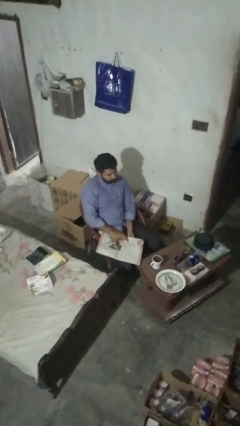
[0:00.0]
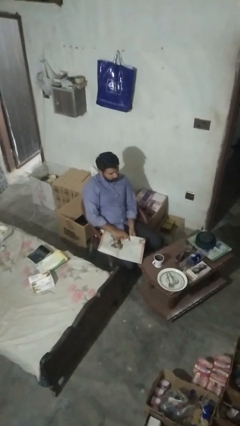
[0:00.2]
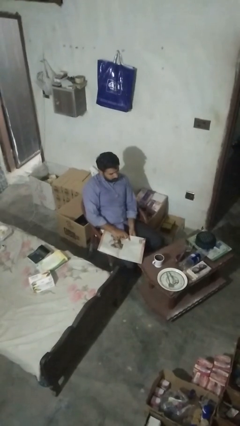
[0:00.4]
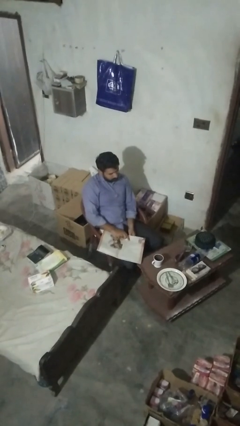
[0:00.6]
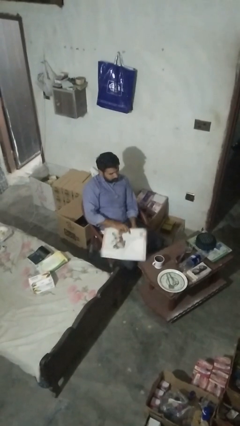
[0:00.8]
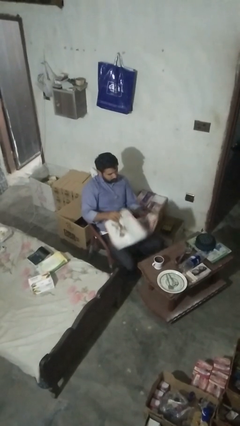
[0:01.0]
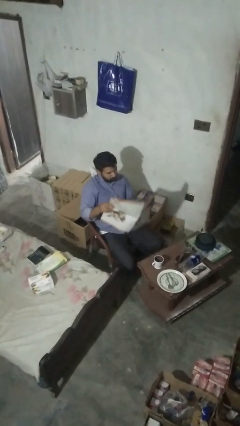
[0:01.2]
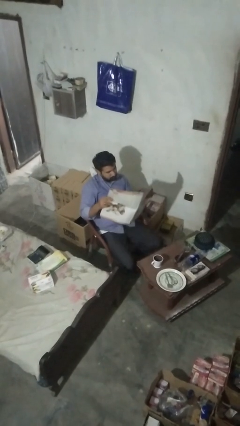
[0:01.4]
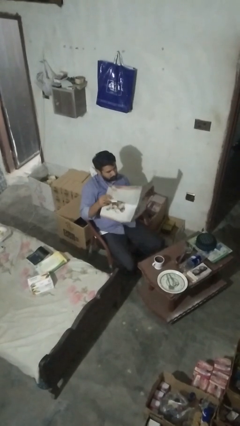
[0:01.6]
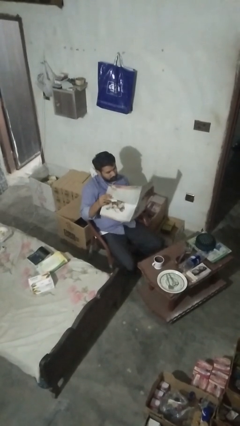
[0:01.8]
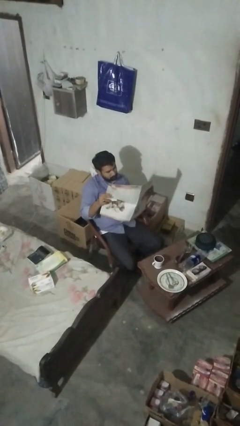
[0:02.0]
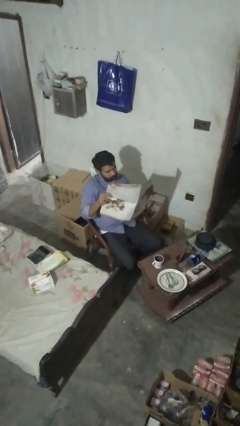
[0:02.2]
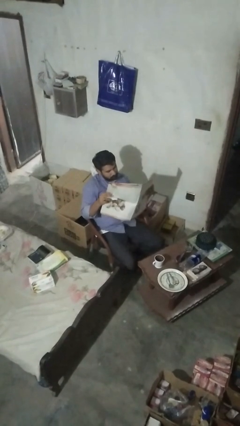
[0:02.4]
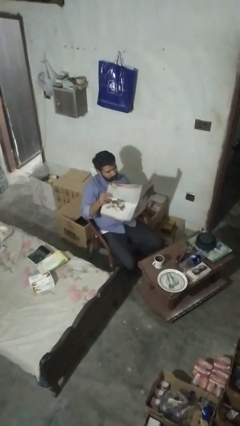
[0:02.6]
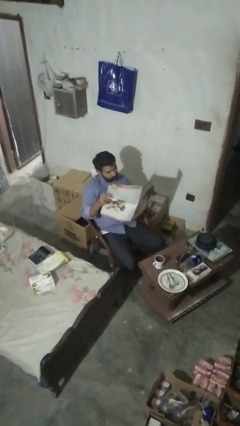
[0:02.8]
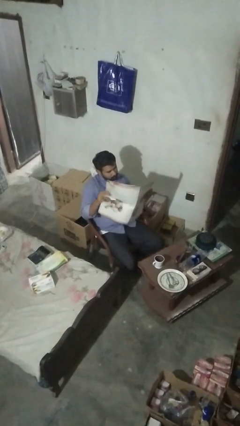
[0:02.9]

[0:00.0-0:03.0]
person reads newspaper

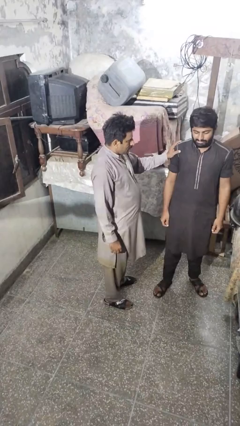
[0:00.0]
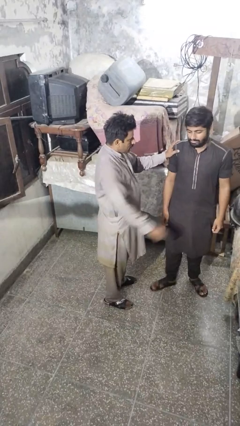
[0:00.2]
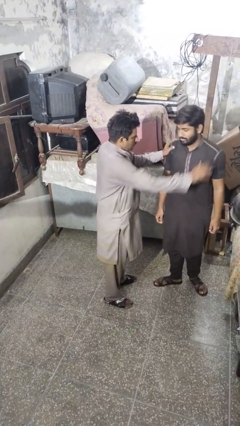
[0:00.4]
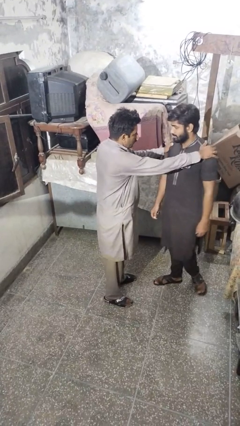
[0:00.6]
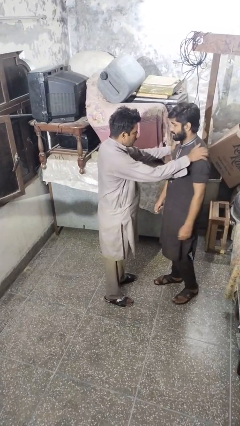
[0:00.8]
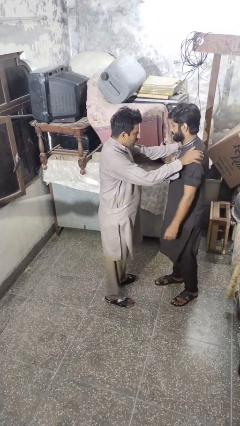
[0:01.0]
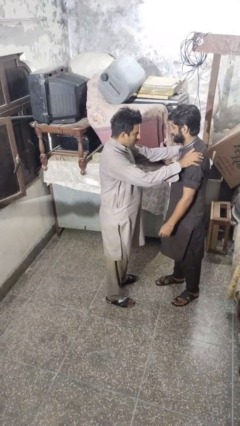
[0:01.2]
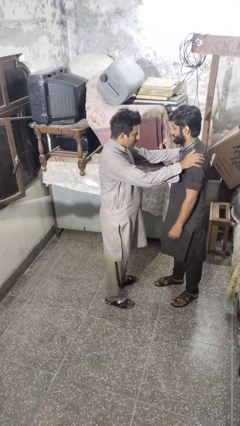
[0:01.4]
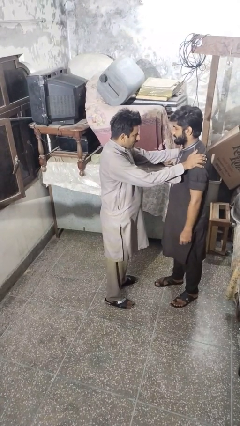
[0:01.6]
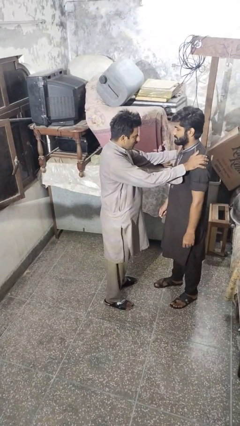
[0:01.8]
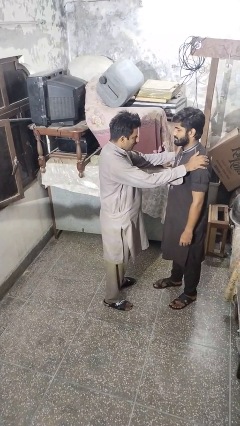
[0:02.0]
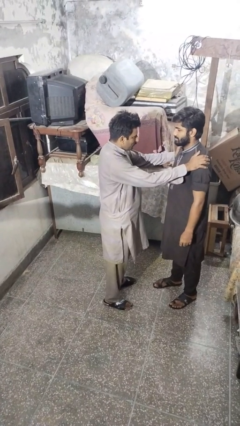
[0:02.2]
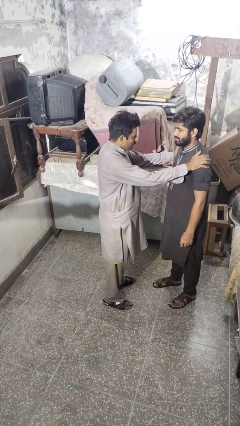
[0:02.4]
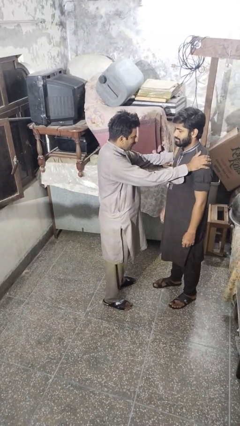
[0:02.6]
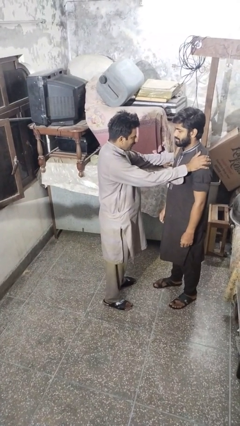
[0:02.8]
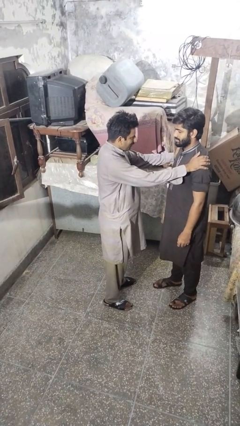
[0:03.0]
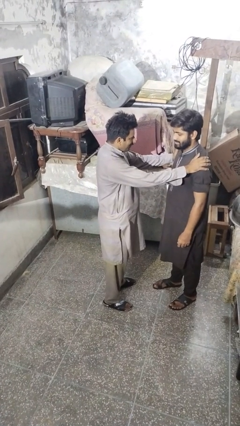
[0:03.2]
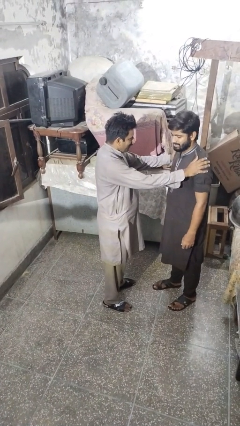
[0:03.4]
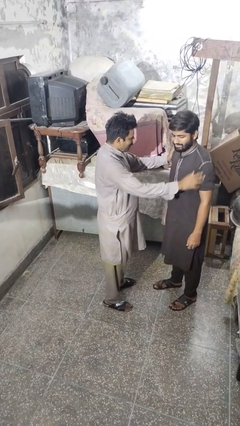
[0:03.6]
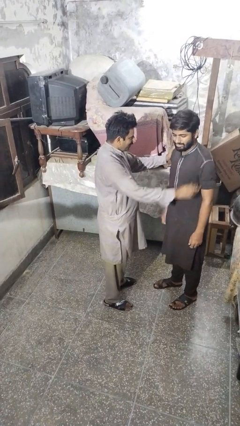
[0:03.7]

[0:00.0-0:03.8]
person spins person around

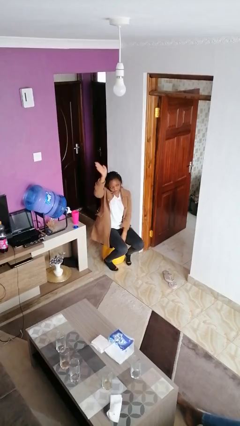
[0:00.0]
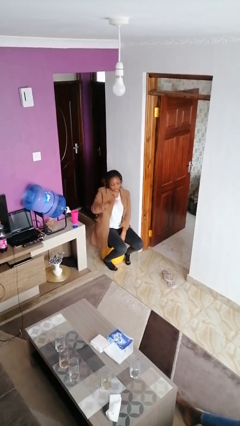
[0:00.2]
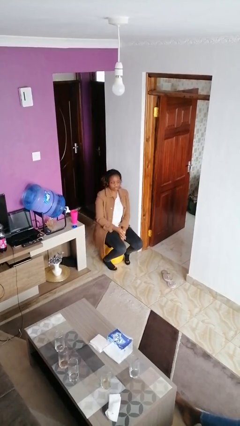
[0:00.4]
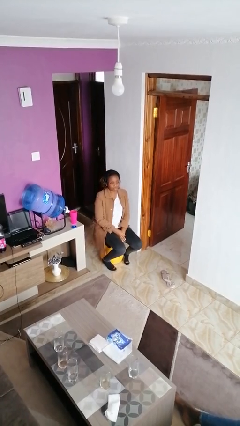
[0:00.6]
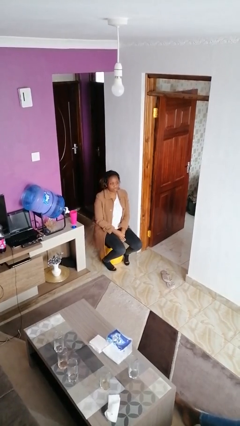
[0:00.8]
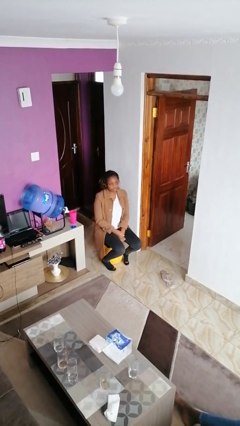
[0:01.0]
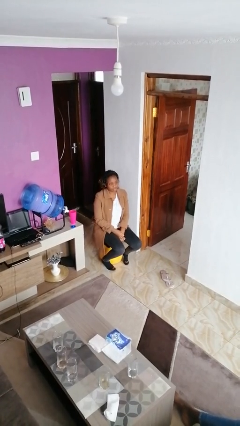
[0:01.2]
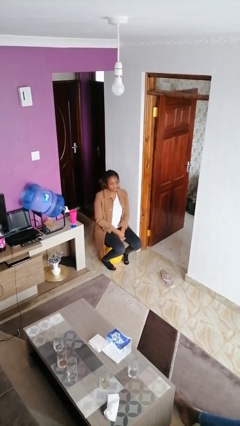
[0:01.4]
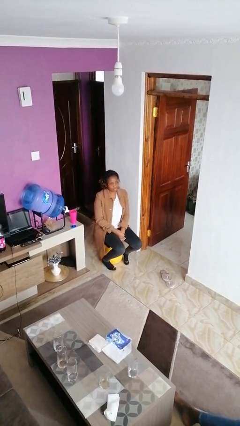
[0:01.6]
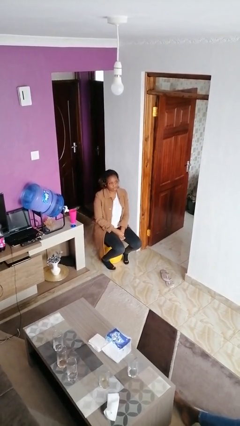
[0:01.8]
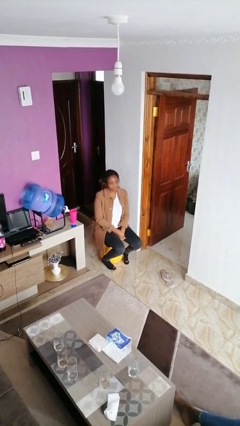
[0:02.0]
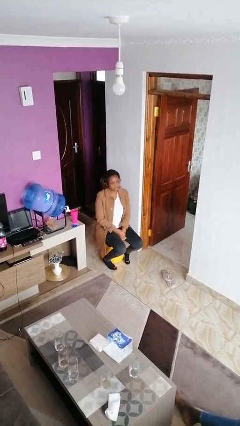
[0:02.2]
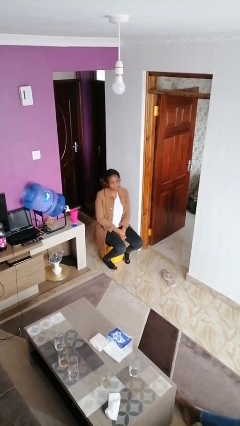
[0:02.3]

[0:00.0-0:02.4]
person gestures lower hand

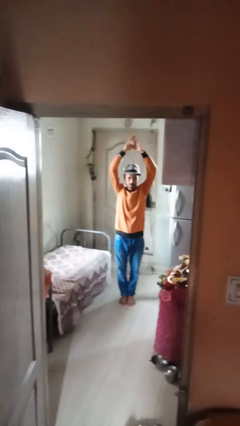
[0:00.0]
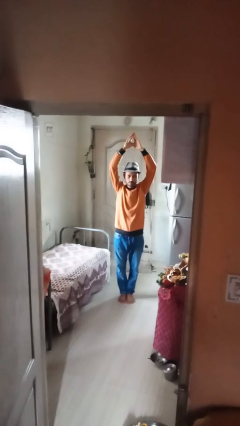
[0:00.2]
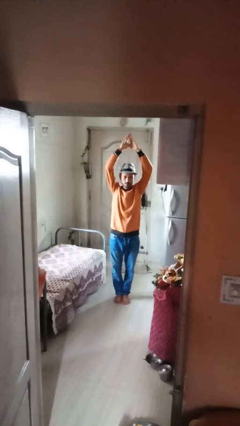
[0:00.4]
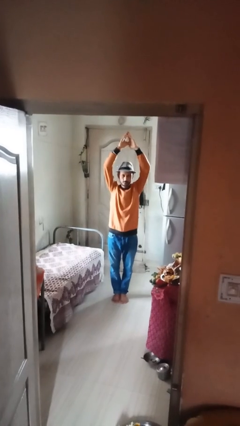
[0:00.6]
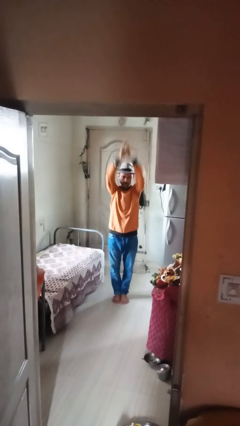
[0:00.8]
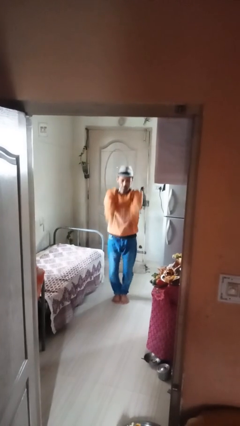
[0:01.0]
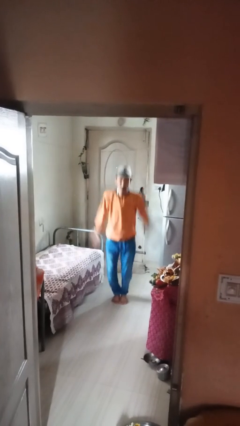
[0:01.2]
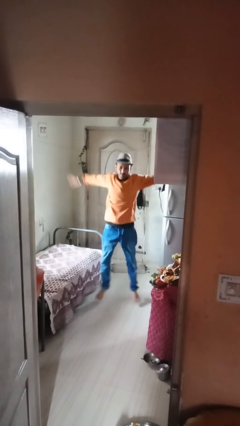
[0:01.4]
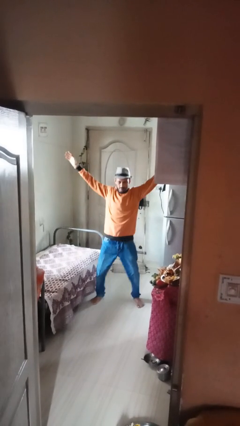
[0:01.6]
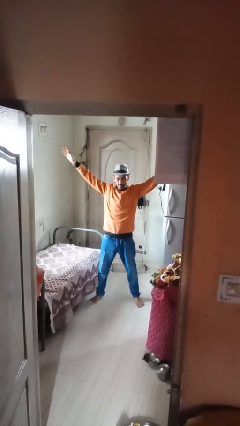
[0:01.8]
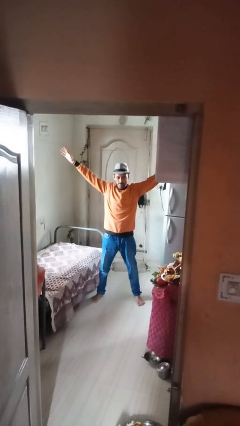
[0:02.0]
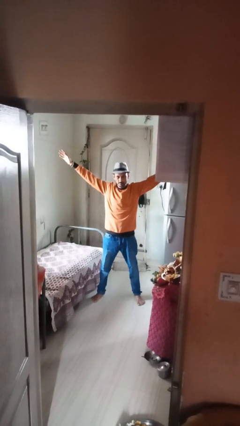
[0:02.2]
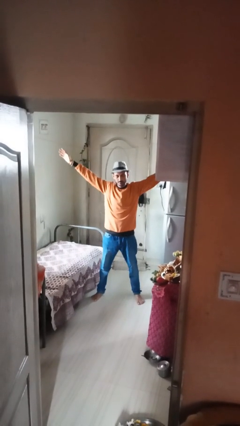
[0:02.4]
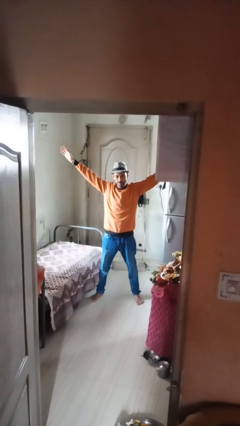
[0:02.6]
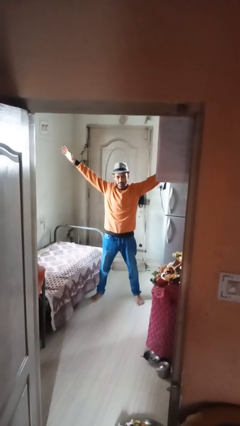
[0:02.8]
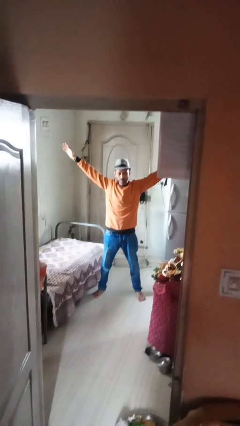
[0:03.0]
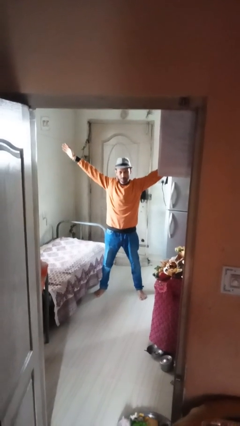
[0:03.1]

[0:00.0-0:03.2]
person exercises with jumping jacks

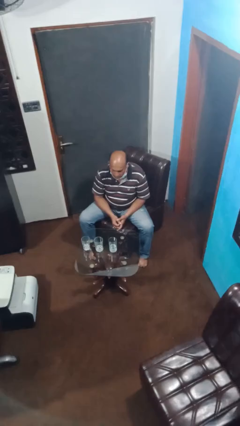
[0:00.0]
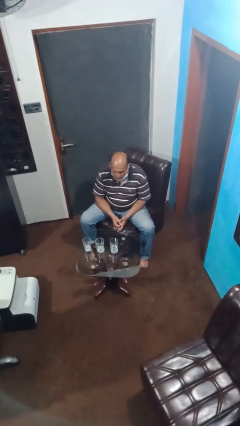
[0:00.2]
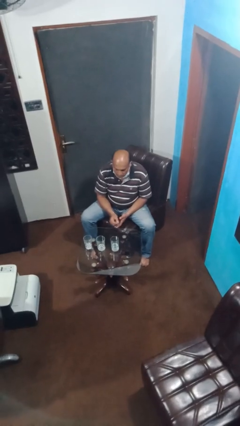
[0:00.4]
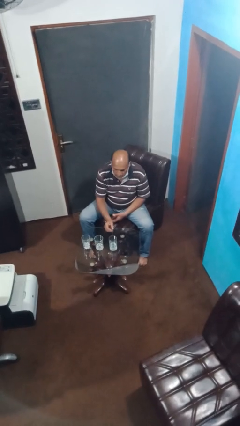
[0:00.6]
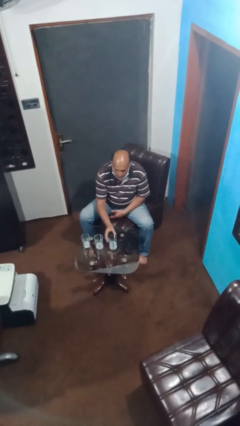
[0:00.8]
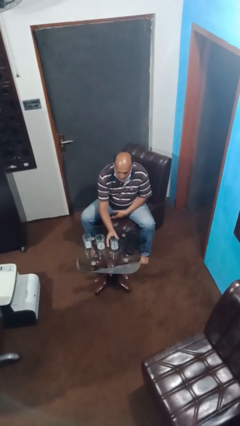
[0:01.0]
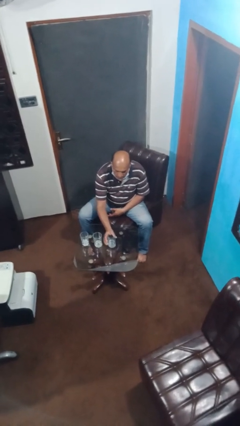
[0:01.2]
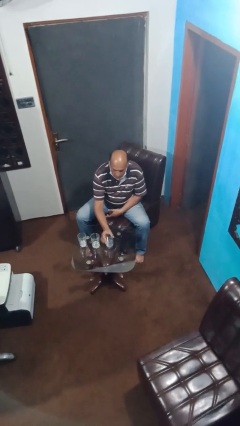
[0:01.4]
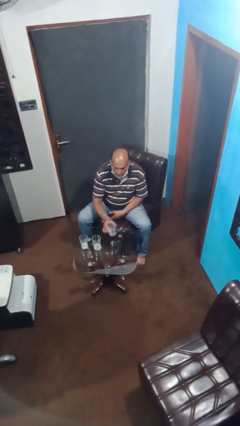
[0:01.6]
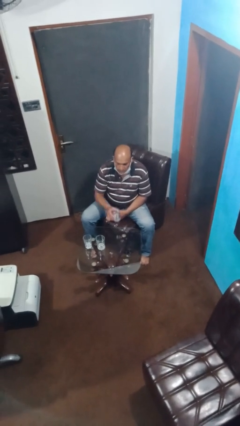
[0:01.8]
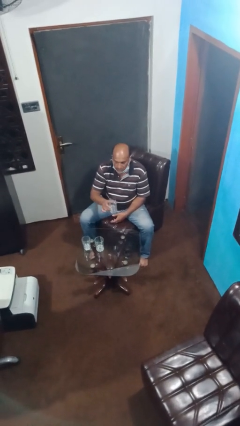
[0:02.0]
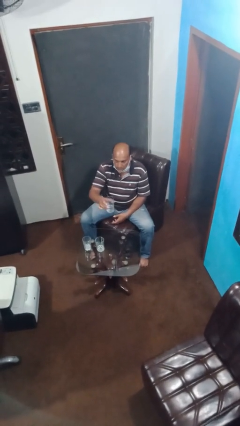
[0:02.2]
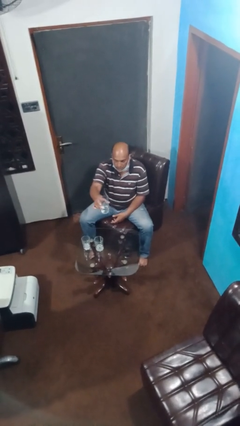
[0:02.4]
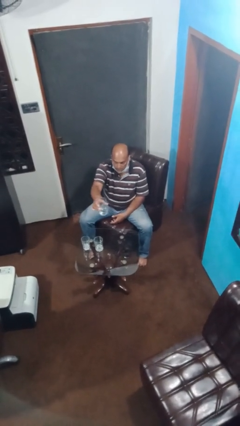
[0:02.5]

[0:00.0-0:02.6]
person picks up object from table

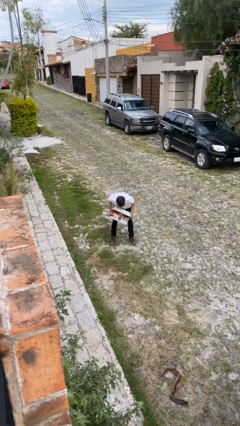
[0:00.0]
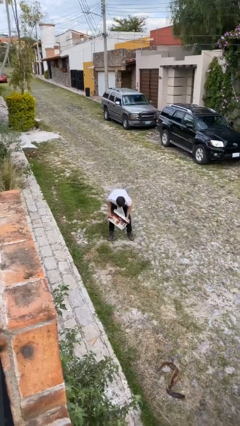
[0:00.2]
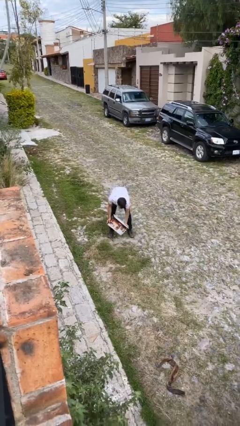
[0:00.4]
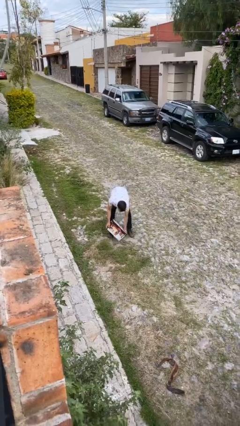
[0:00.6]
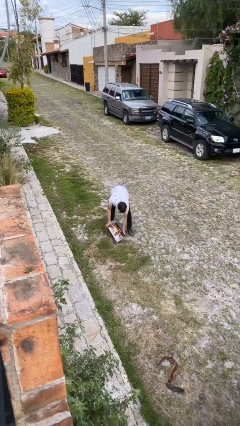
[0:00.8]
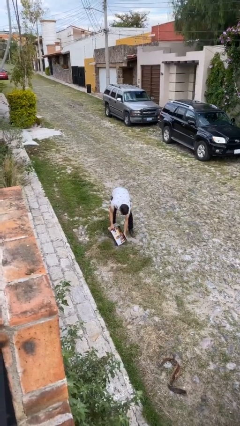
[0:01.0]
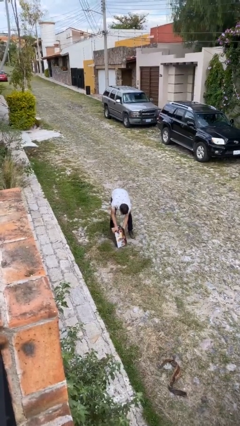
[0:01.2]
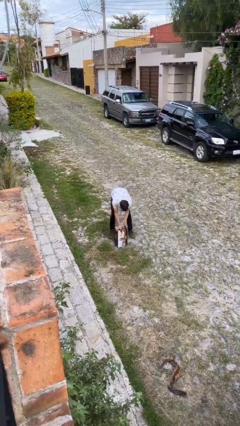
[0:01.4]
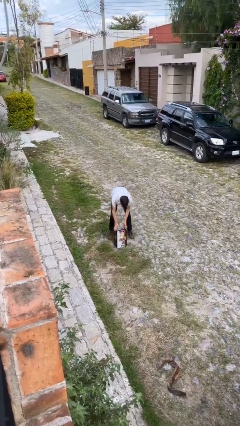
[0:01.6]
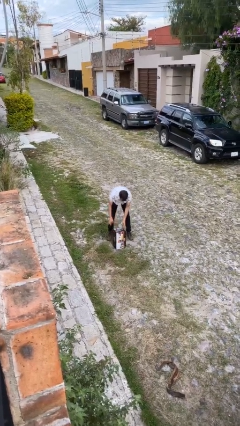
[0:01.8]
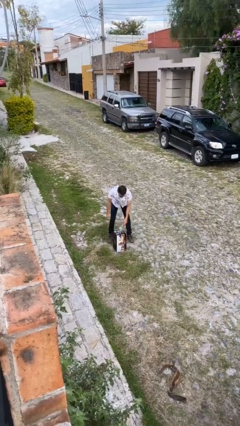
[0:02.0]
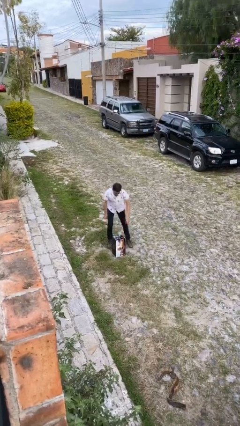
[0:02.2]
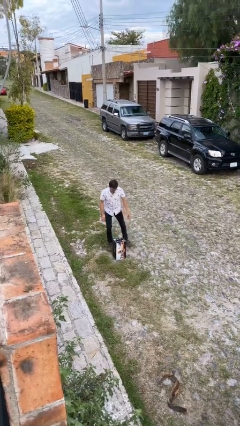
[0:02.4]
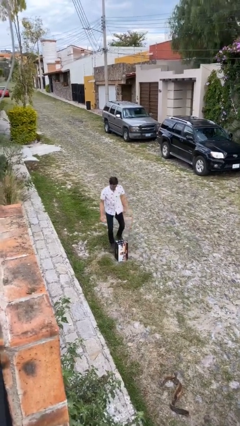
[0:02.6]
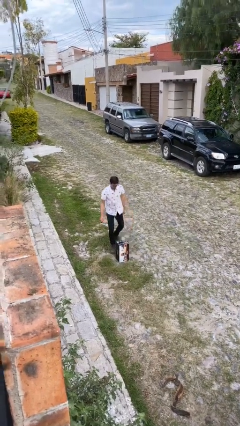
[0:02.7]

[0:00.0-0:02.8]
person puts down object on floor
